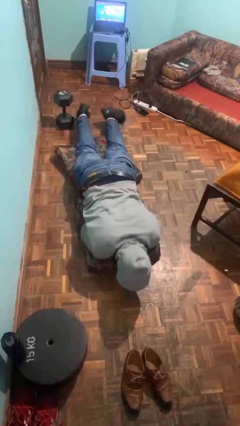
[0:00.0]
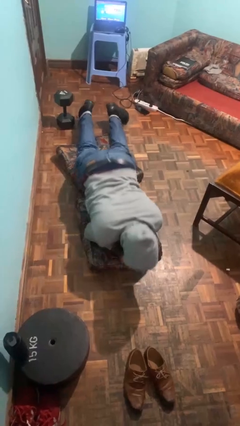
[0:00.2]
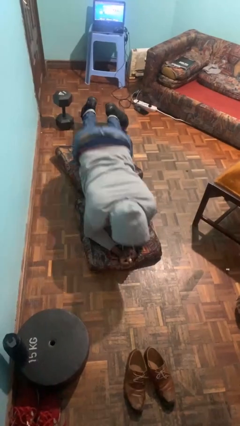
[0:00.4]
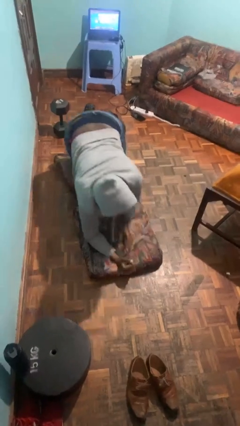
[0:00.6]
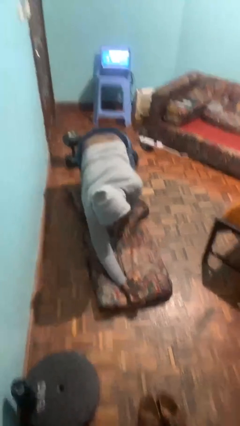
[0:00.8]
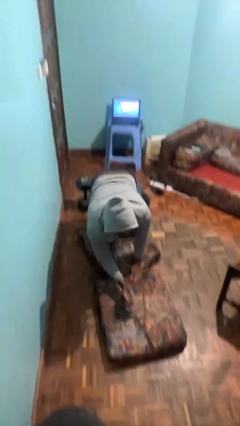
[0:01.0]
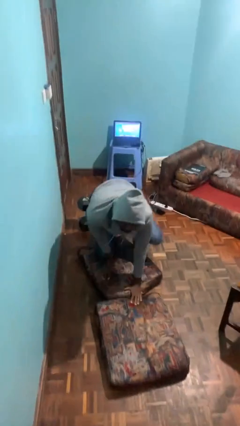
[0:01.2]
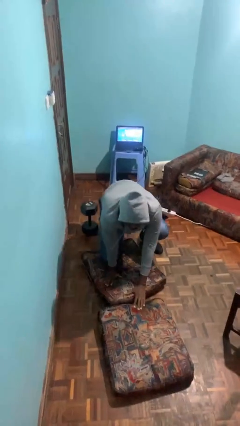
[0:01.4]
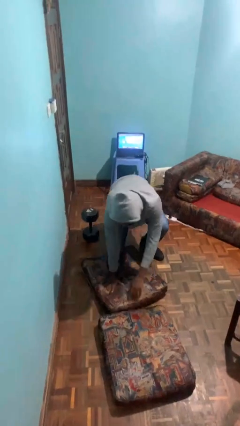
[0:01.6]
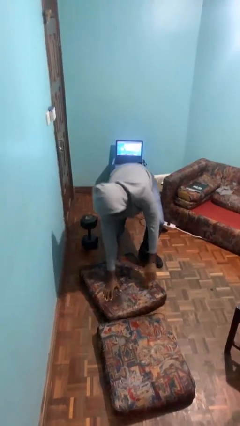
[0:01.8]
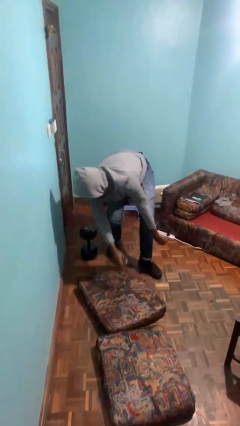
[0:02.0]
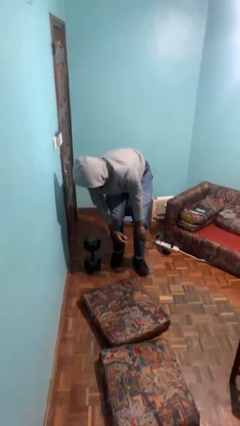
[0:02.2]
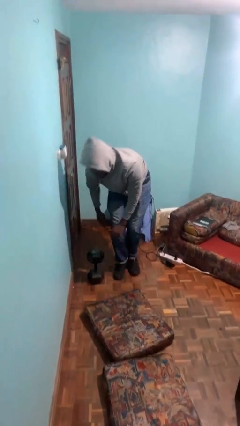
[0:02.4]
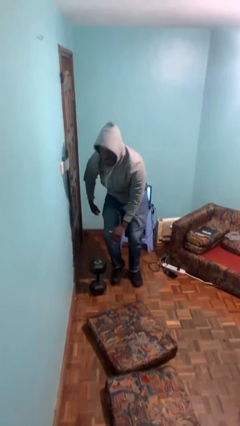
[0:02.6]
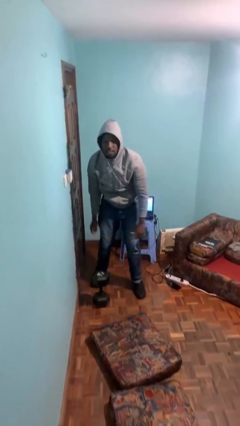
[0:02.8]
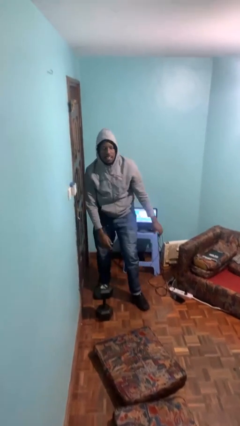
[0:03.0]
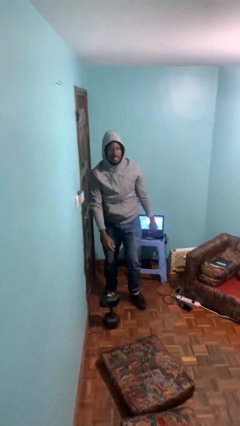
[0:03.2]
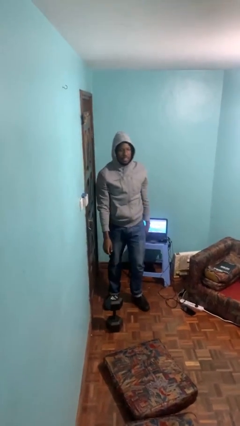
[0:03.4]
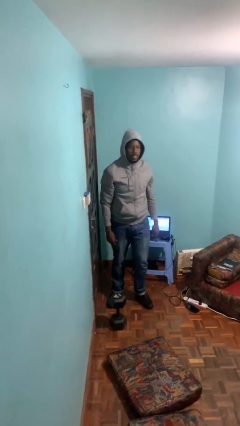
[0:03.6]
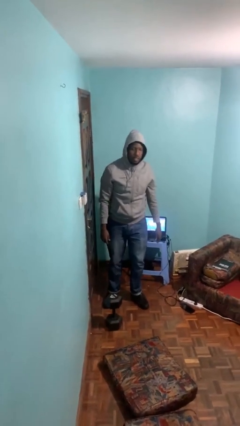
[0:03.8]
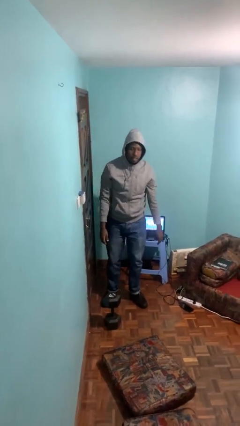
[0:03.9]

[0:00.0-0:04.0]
person stands up from floor

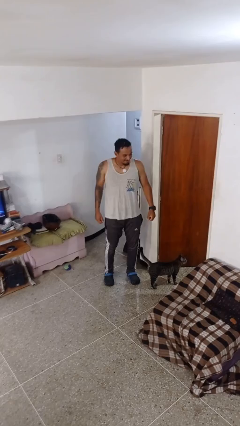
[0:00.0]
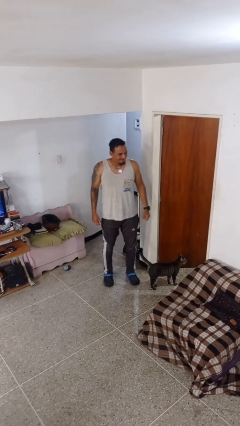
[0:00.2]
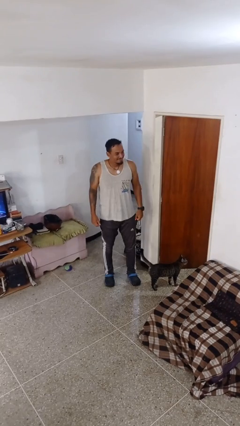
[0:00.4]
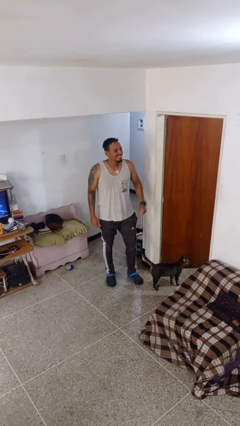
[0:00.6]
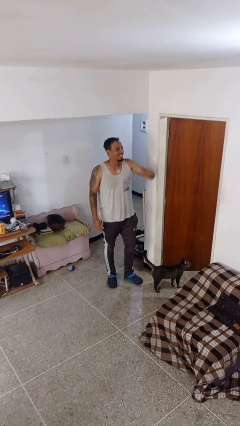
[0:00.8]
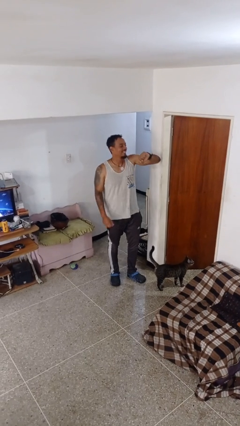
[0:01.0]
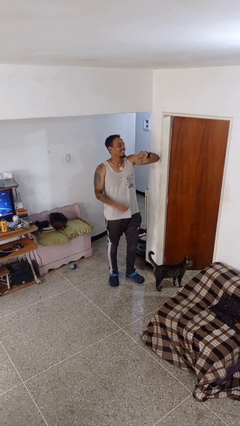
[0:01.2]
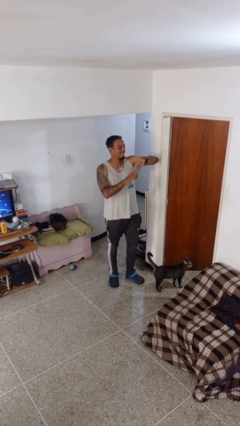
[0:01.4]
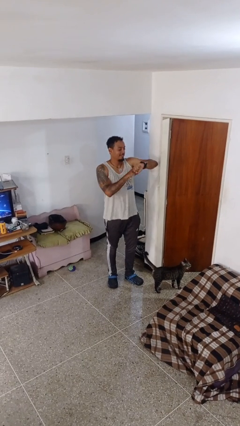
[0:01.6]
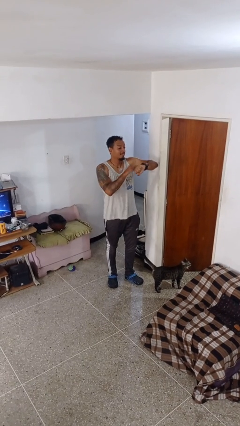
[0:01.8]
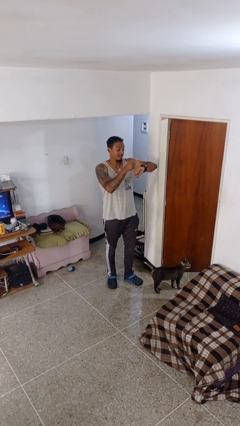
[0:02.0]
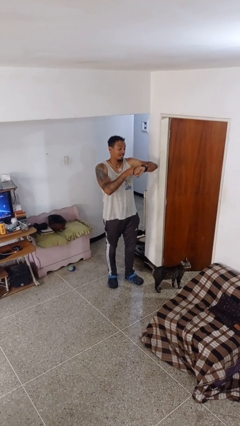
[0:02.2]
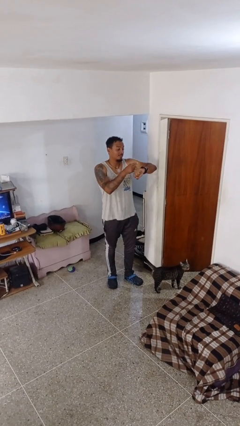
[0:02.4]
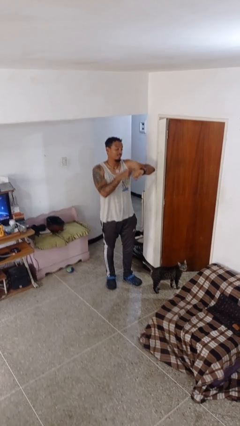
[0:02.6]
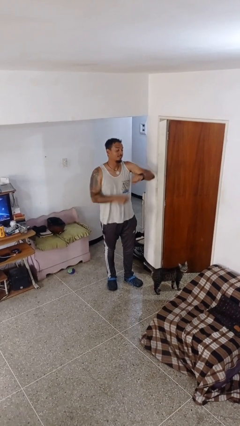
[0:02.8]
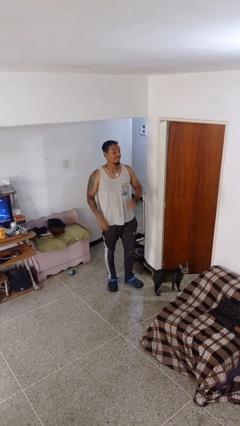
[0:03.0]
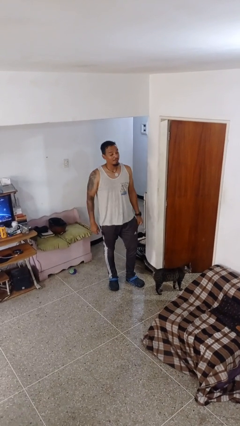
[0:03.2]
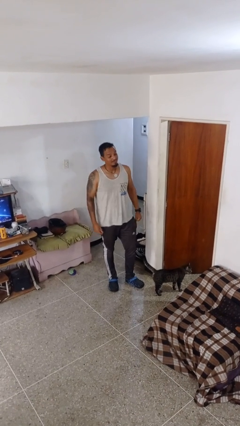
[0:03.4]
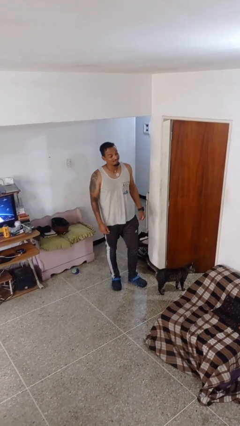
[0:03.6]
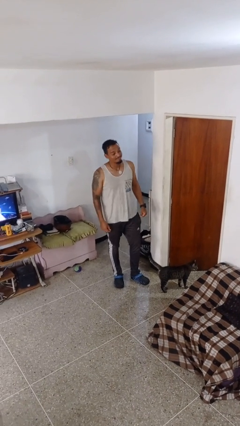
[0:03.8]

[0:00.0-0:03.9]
person looks at wristwatch

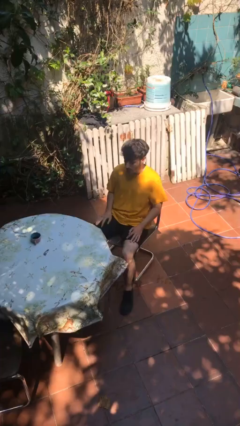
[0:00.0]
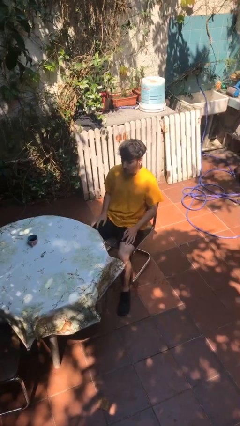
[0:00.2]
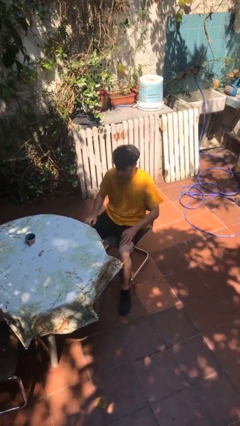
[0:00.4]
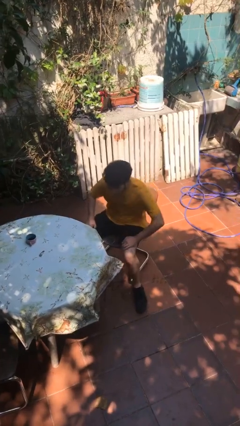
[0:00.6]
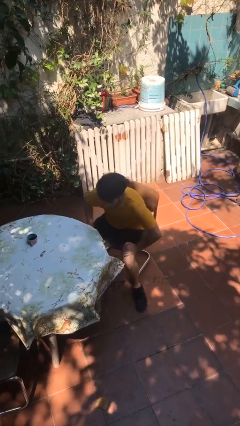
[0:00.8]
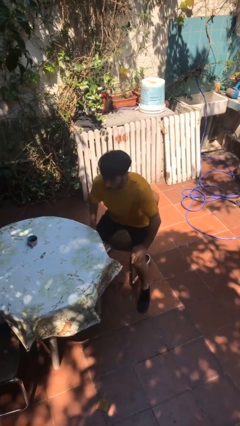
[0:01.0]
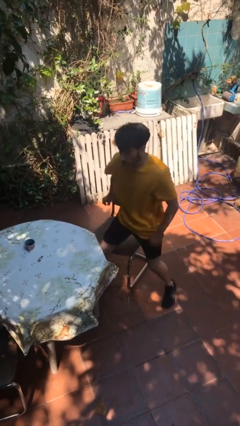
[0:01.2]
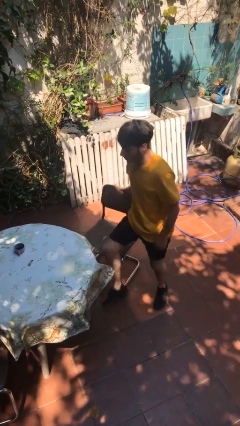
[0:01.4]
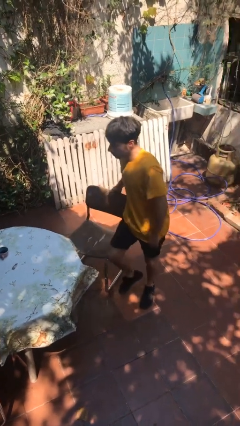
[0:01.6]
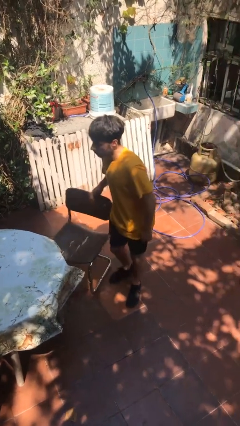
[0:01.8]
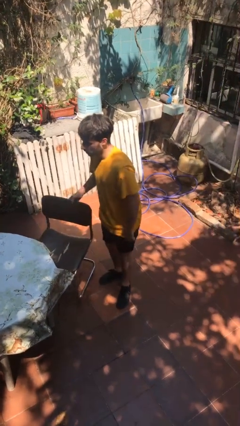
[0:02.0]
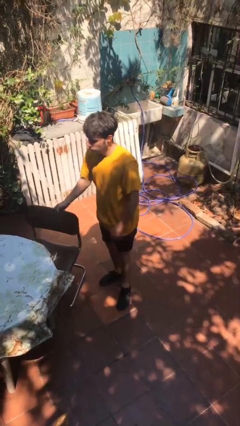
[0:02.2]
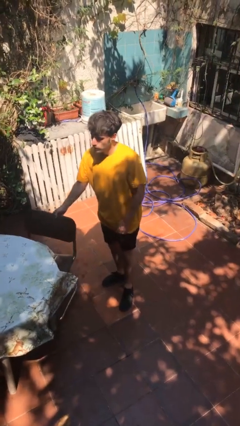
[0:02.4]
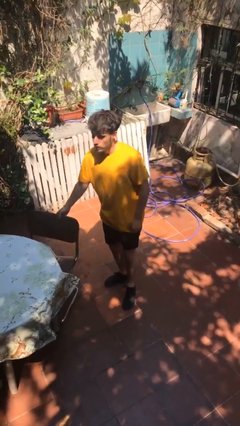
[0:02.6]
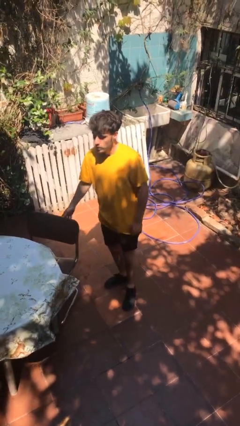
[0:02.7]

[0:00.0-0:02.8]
person stands up

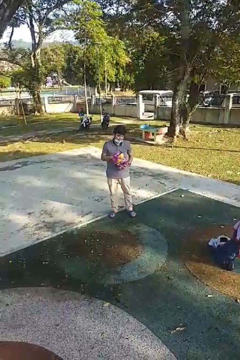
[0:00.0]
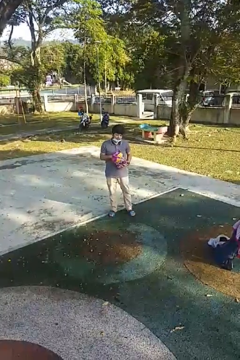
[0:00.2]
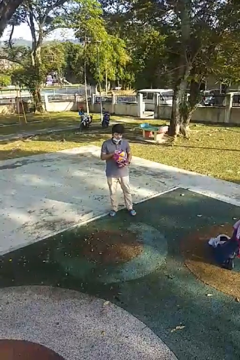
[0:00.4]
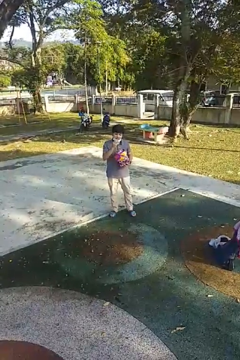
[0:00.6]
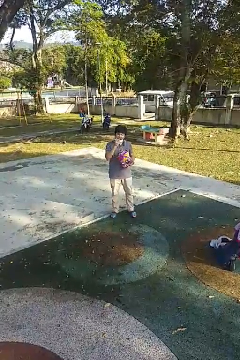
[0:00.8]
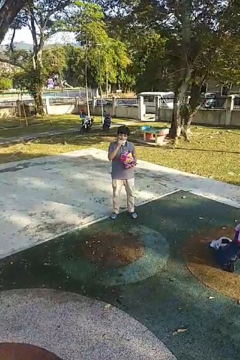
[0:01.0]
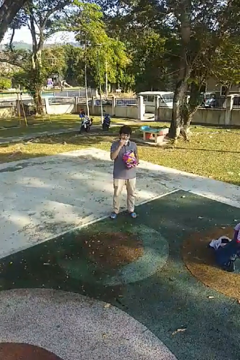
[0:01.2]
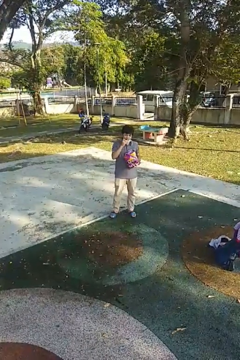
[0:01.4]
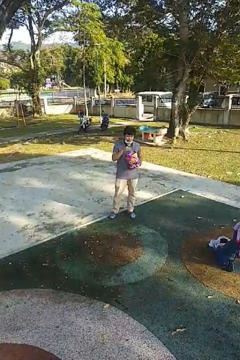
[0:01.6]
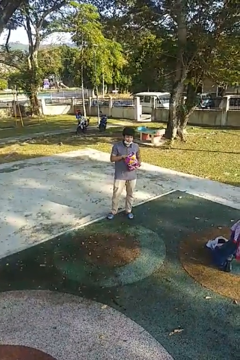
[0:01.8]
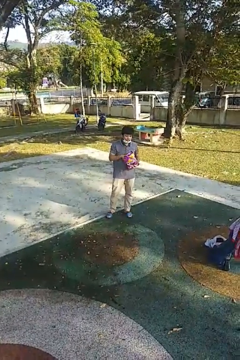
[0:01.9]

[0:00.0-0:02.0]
person eats snack from bag

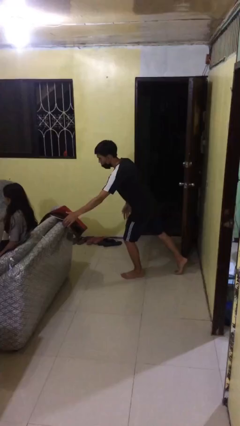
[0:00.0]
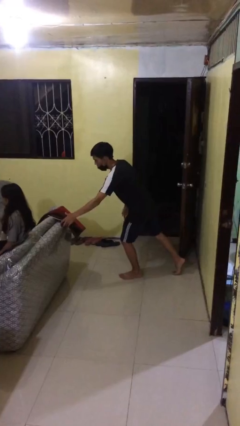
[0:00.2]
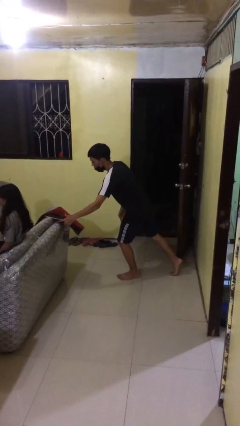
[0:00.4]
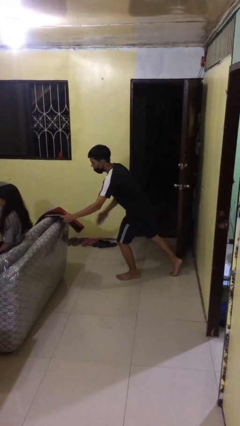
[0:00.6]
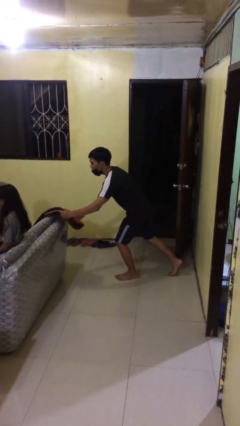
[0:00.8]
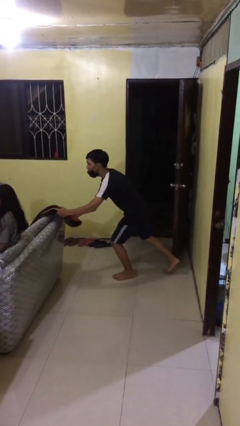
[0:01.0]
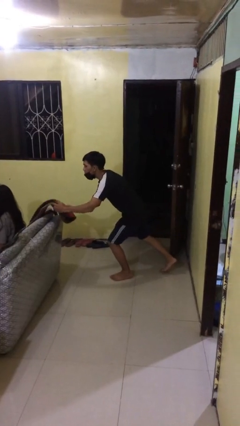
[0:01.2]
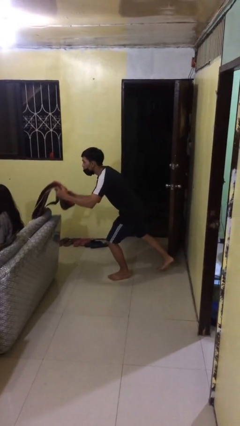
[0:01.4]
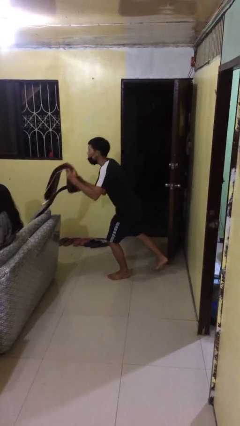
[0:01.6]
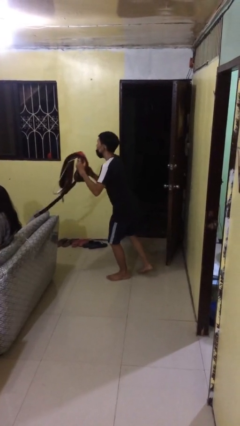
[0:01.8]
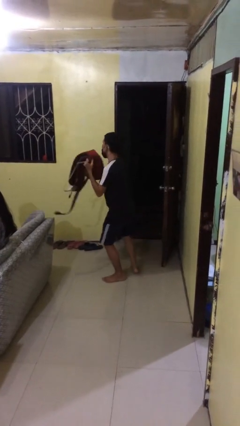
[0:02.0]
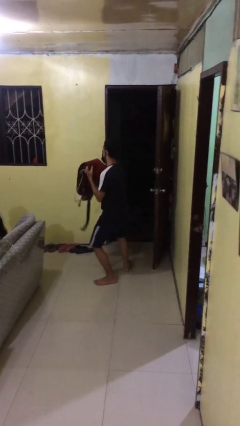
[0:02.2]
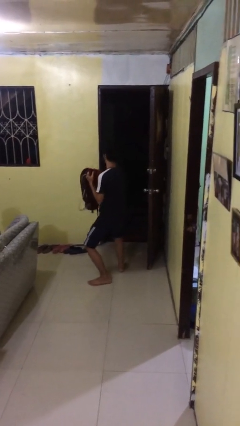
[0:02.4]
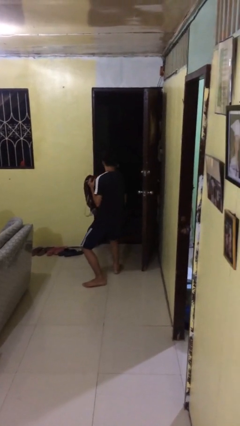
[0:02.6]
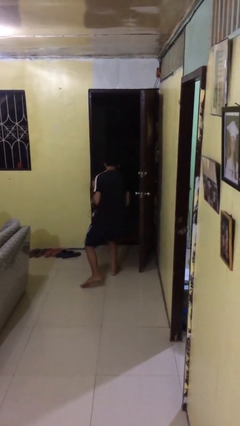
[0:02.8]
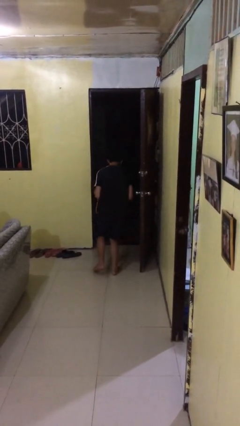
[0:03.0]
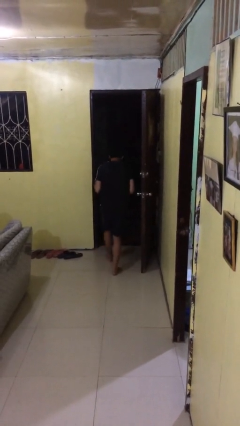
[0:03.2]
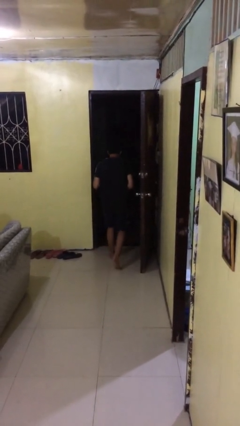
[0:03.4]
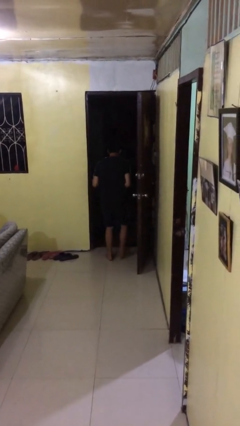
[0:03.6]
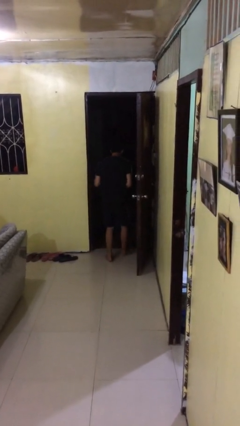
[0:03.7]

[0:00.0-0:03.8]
person steals object from person

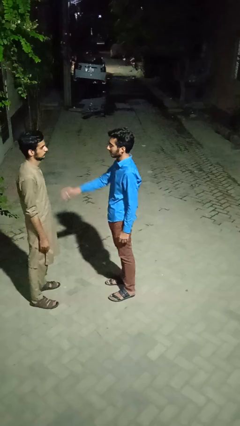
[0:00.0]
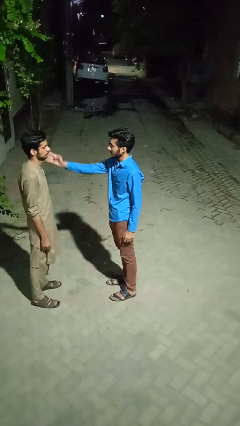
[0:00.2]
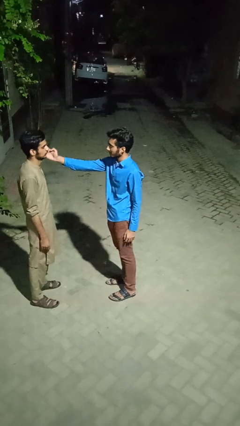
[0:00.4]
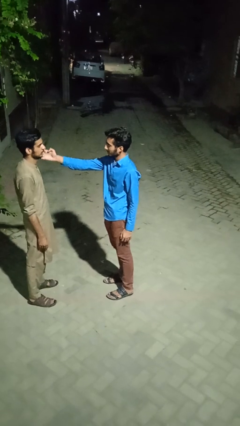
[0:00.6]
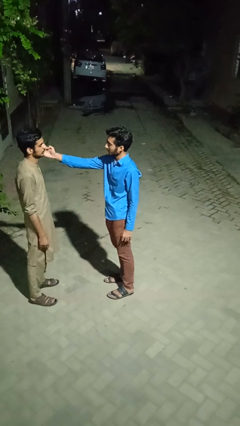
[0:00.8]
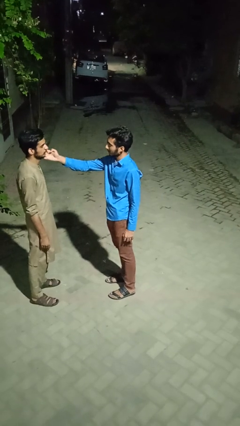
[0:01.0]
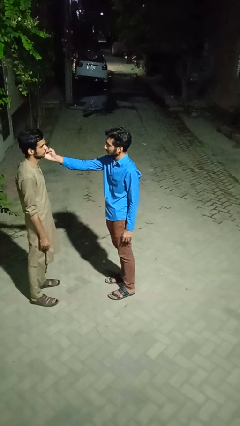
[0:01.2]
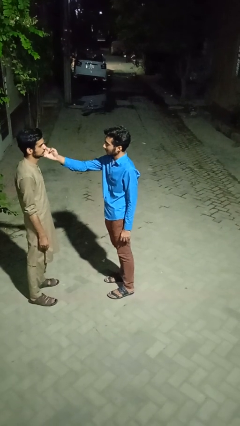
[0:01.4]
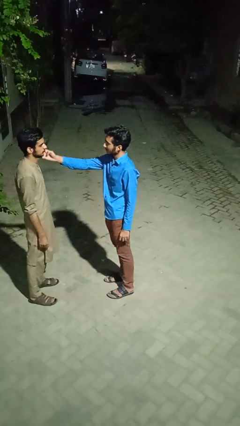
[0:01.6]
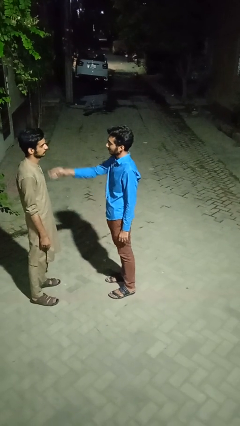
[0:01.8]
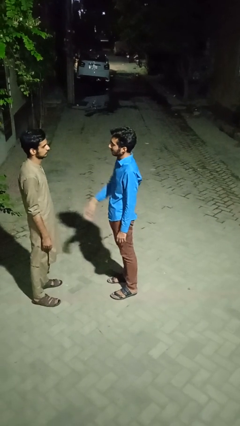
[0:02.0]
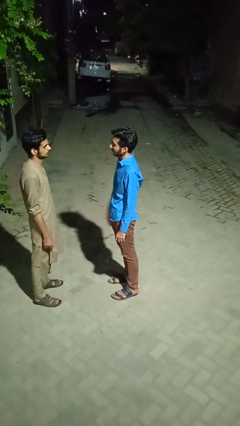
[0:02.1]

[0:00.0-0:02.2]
person touches face of person
